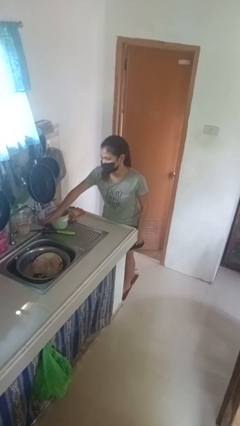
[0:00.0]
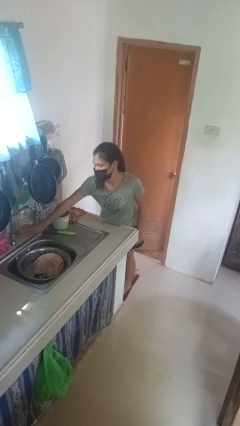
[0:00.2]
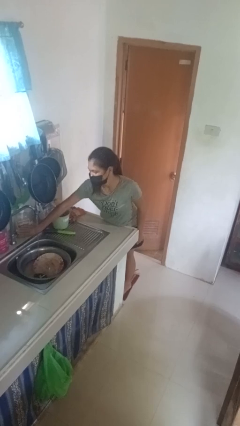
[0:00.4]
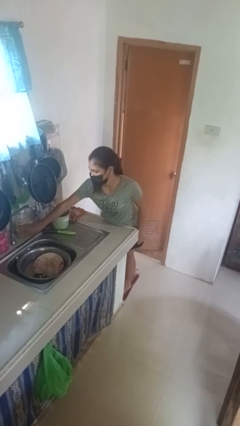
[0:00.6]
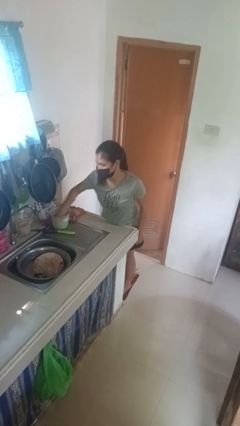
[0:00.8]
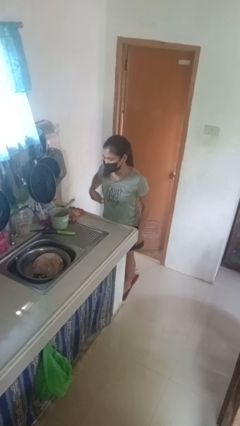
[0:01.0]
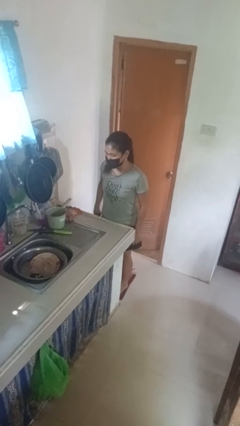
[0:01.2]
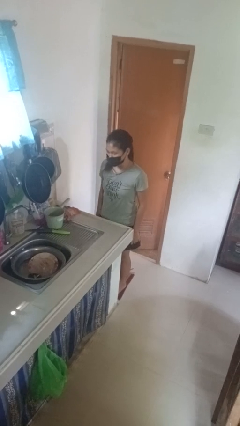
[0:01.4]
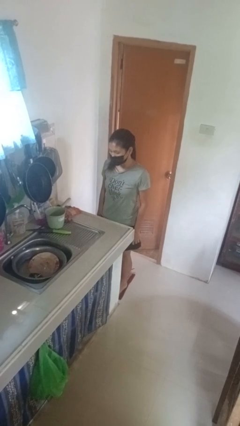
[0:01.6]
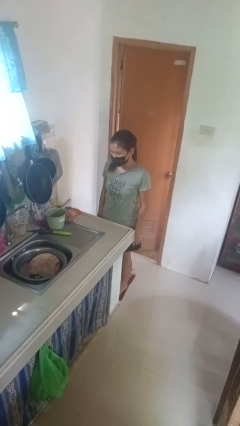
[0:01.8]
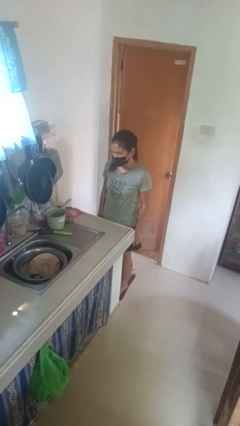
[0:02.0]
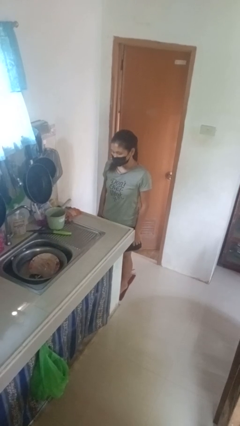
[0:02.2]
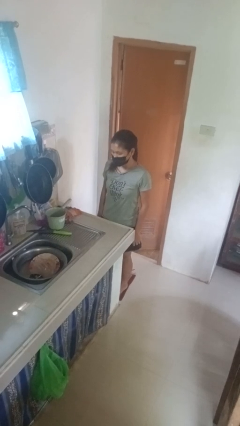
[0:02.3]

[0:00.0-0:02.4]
person turns off faucet

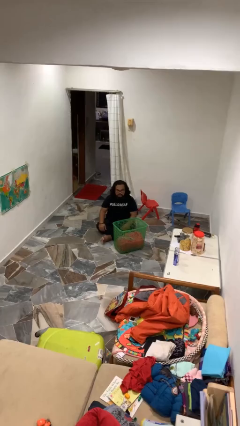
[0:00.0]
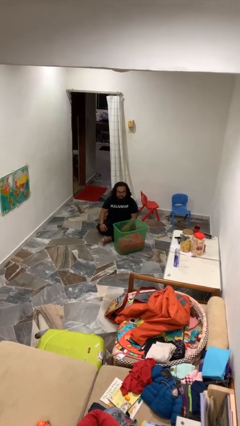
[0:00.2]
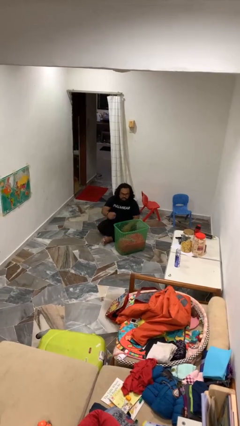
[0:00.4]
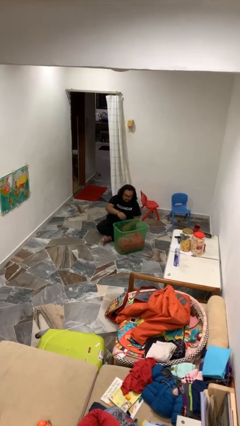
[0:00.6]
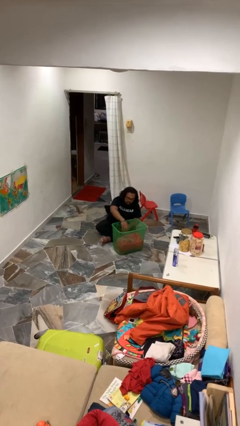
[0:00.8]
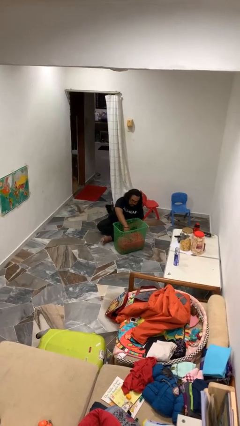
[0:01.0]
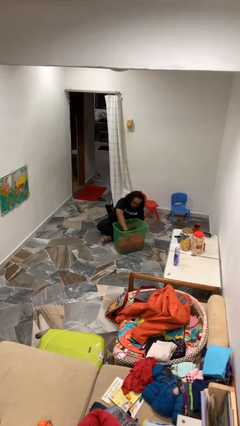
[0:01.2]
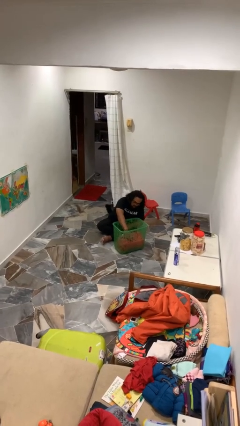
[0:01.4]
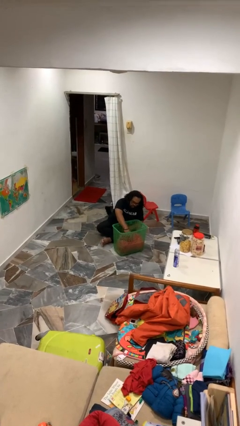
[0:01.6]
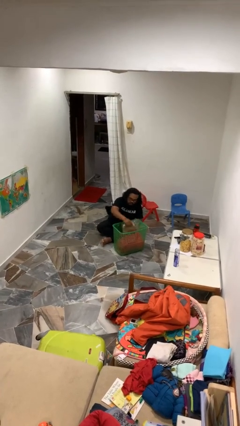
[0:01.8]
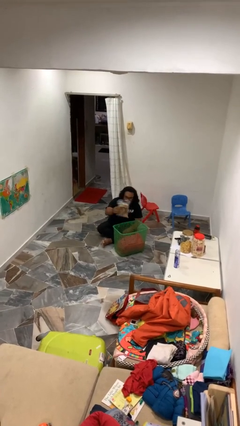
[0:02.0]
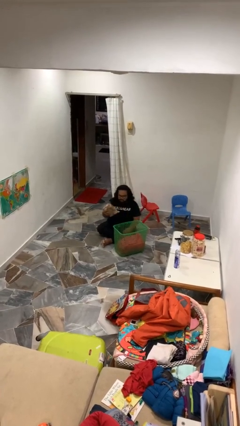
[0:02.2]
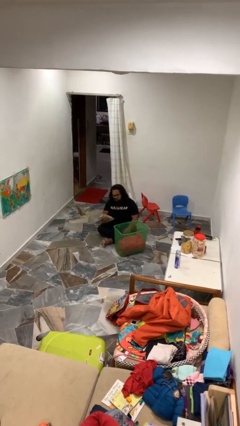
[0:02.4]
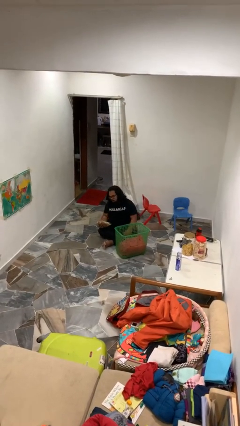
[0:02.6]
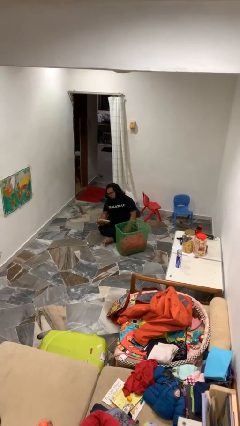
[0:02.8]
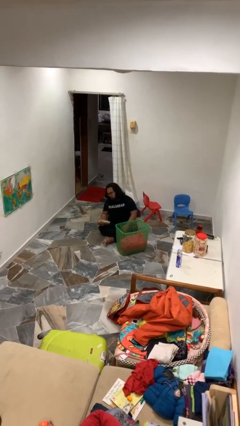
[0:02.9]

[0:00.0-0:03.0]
person takes object from basket

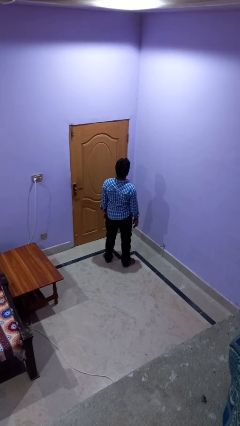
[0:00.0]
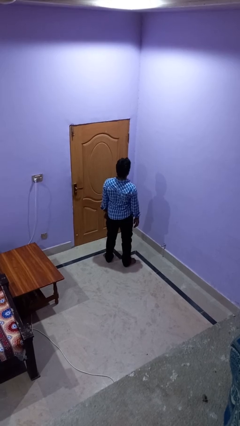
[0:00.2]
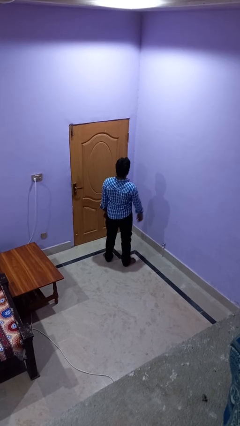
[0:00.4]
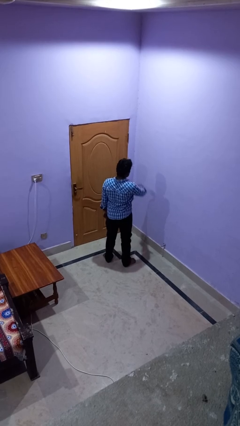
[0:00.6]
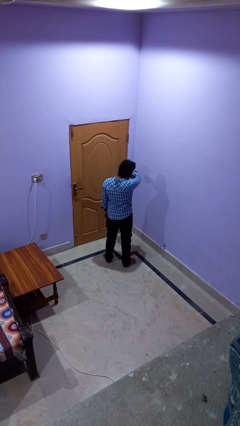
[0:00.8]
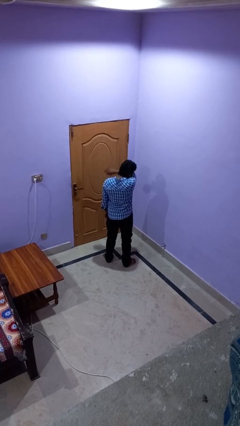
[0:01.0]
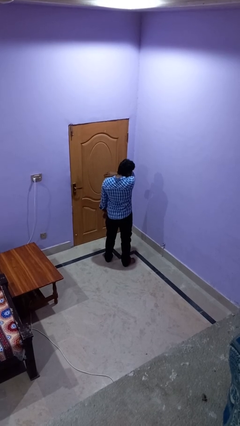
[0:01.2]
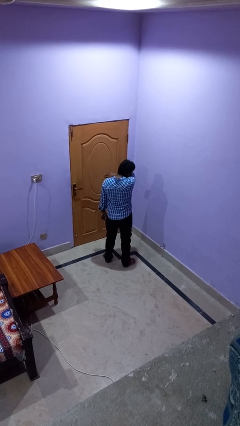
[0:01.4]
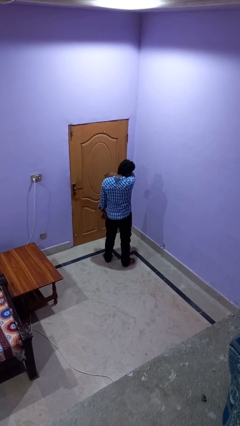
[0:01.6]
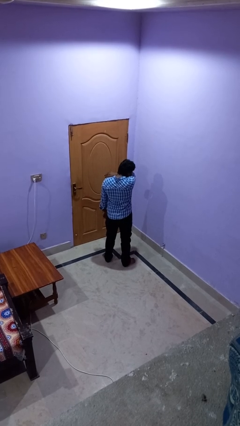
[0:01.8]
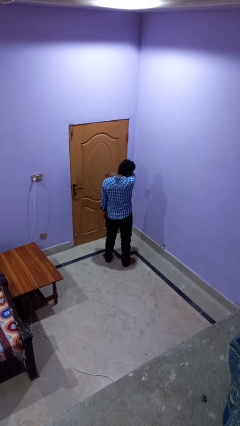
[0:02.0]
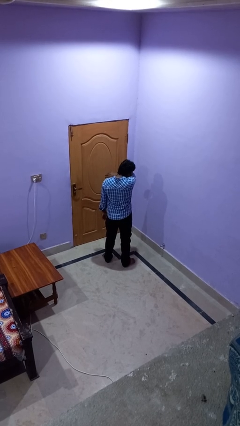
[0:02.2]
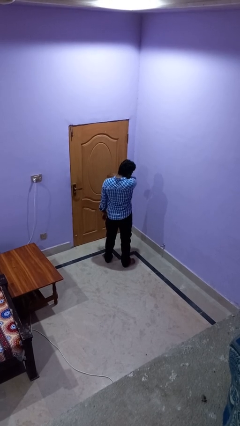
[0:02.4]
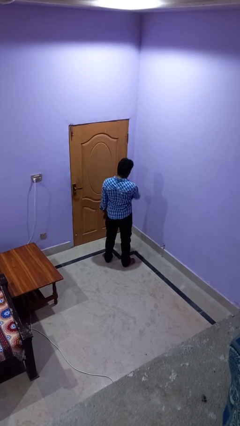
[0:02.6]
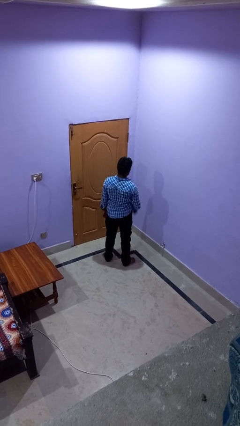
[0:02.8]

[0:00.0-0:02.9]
person sneezes into arm

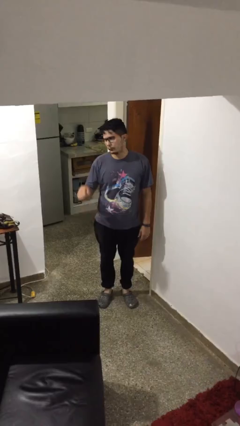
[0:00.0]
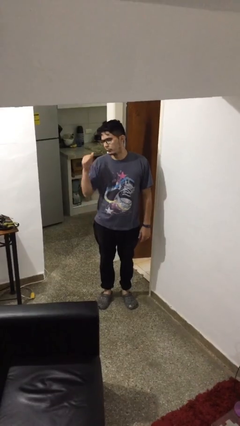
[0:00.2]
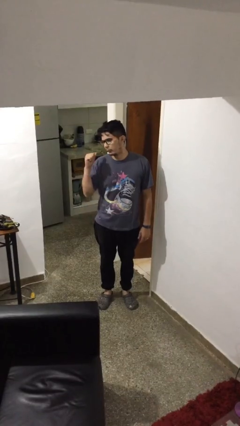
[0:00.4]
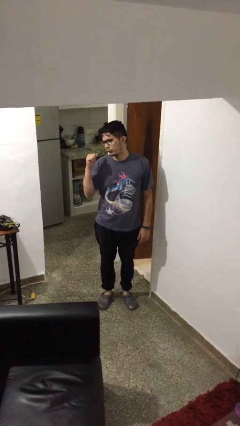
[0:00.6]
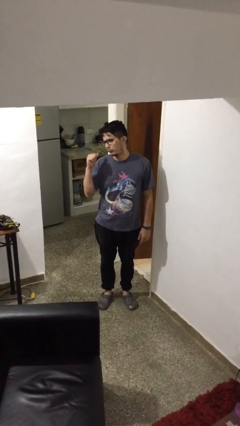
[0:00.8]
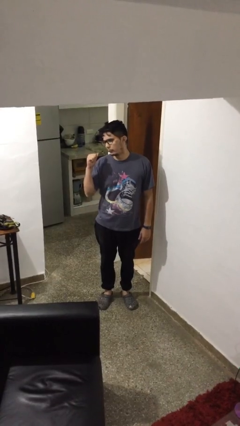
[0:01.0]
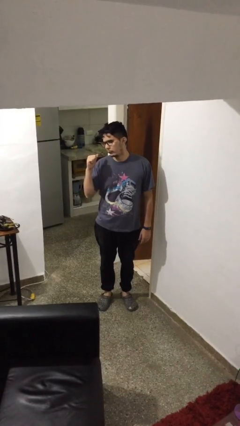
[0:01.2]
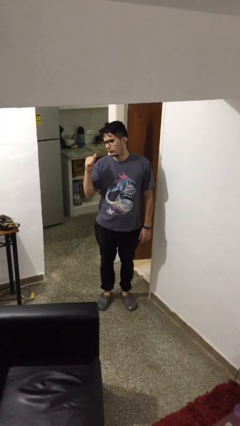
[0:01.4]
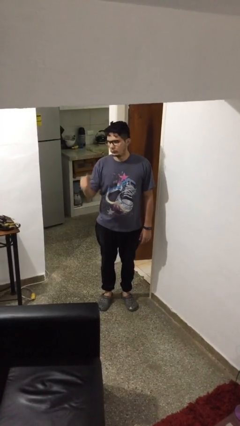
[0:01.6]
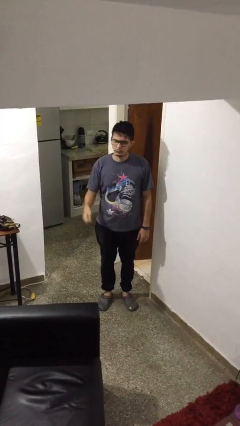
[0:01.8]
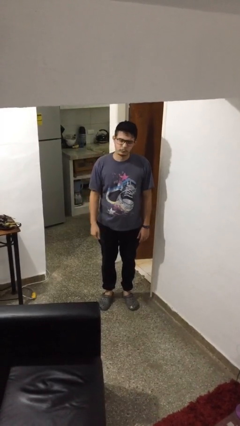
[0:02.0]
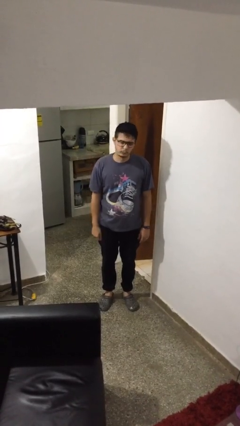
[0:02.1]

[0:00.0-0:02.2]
person gestures behind me

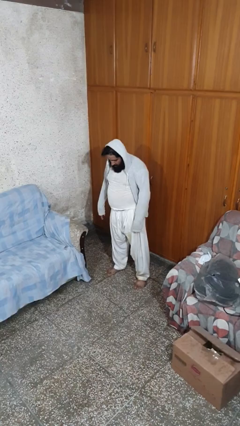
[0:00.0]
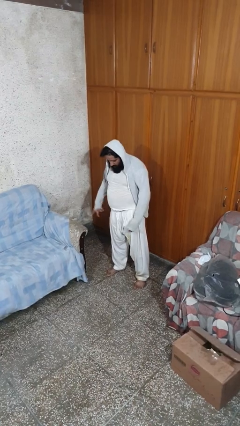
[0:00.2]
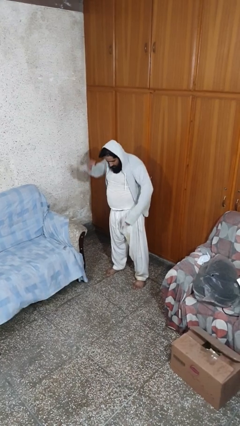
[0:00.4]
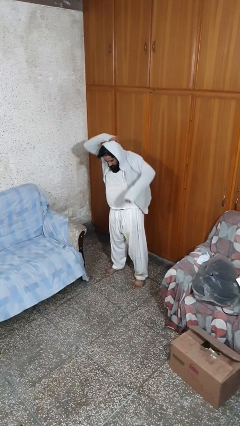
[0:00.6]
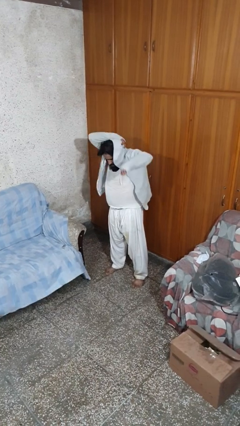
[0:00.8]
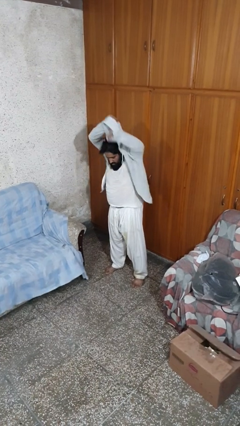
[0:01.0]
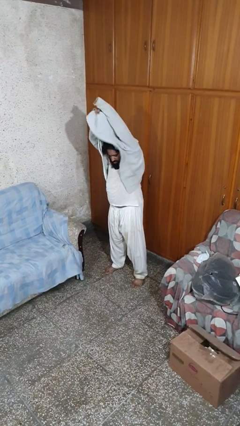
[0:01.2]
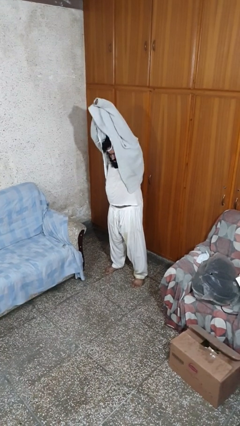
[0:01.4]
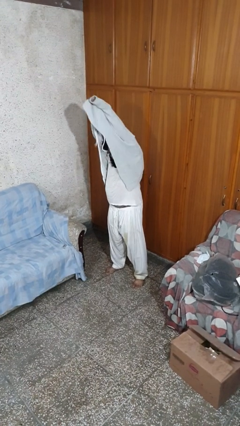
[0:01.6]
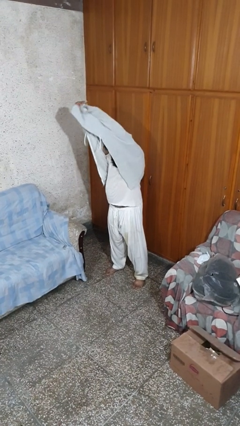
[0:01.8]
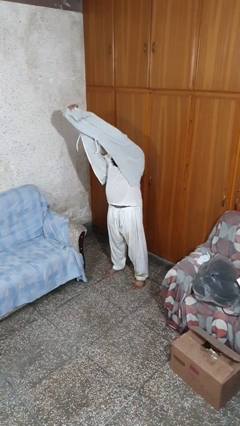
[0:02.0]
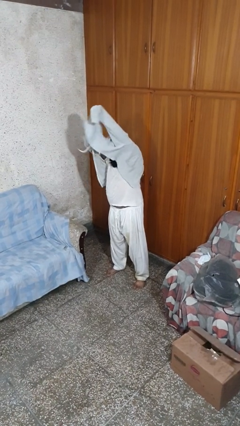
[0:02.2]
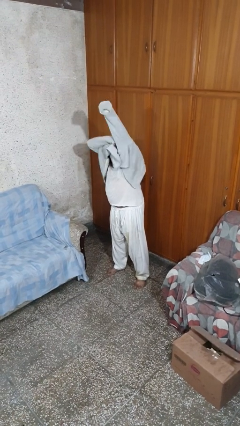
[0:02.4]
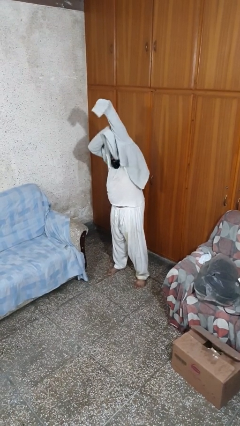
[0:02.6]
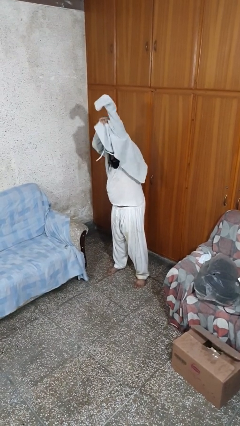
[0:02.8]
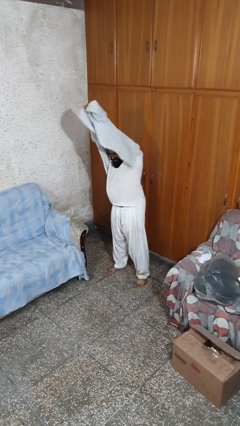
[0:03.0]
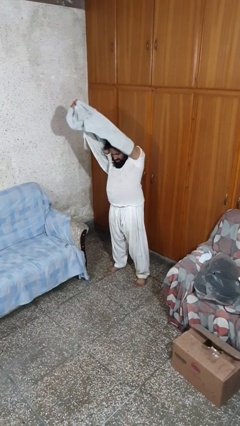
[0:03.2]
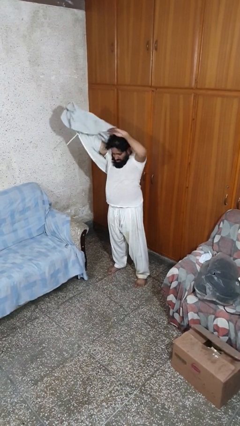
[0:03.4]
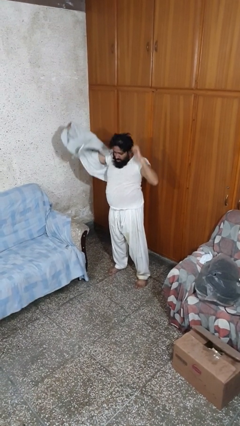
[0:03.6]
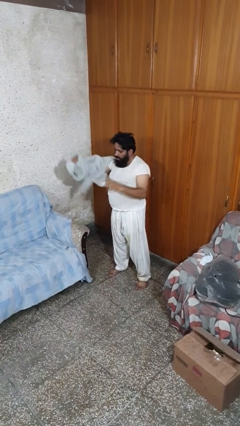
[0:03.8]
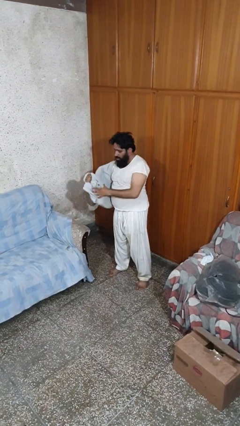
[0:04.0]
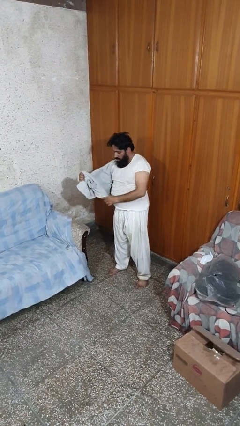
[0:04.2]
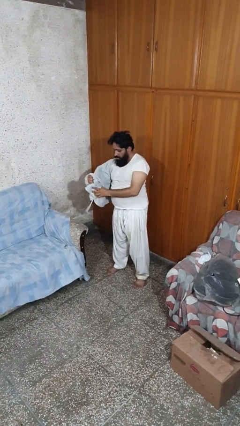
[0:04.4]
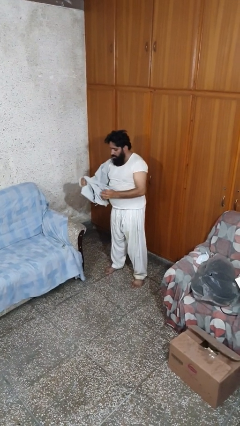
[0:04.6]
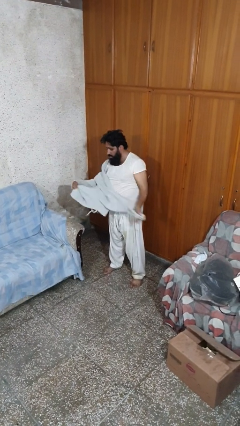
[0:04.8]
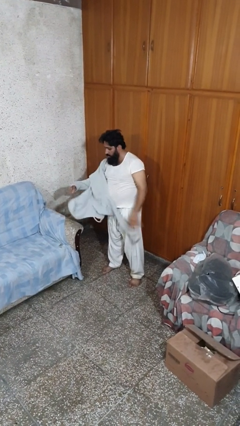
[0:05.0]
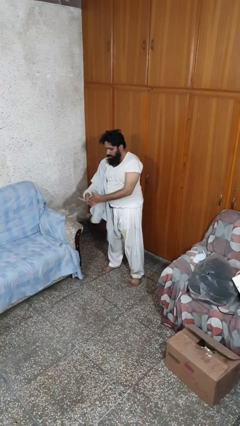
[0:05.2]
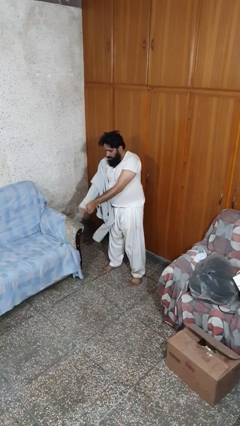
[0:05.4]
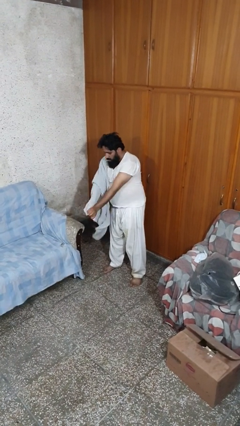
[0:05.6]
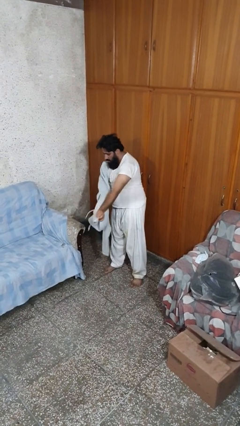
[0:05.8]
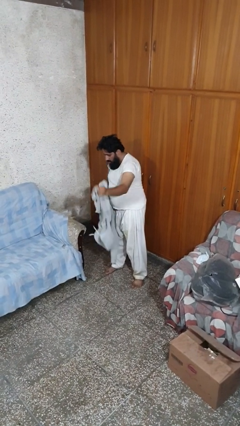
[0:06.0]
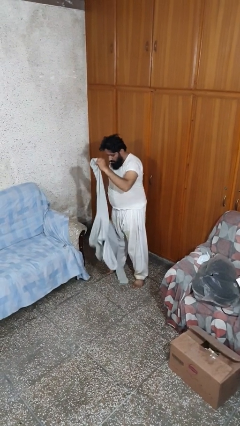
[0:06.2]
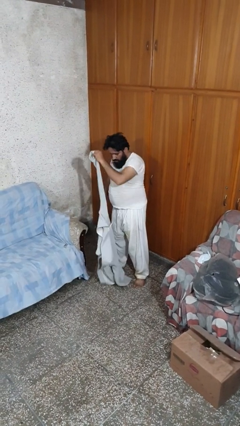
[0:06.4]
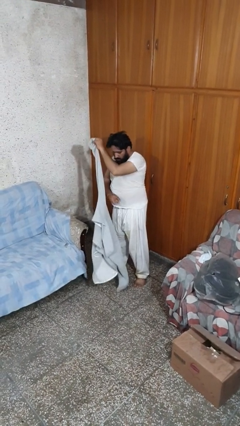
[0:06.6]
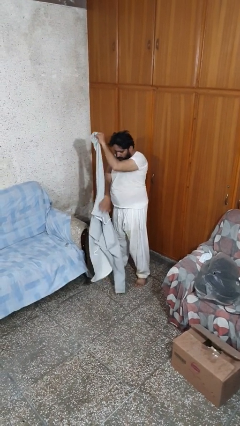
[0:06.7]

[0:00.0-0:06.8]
person takes off hoodie

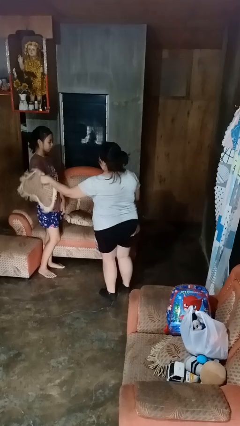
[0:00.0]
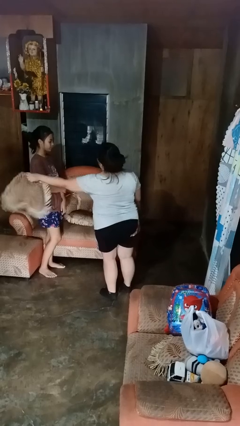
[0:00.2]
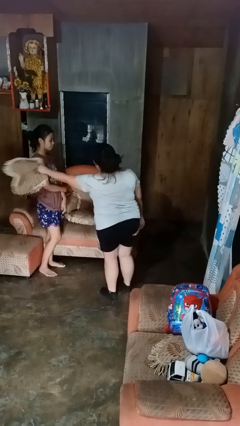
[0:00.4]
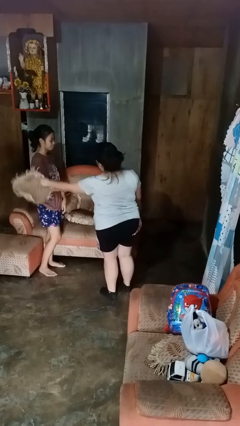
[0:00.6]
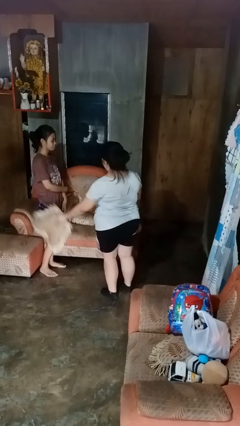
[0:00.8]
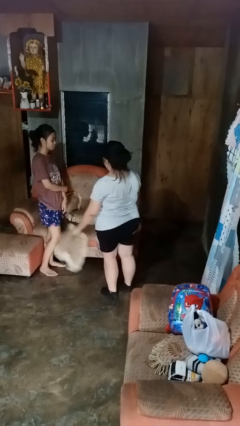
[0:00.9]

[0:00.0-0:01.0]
person hits person with pillow
